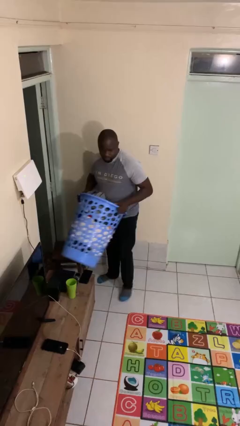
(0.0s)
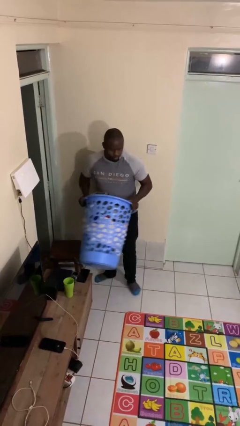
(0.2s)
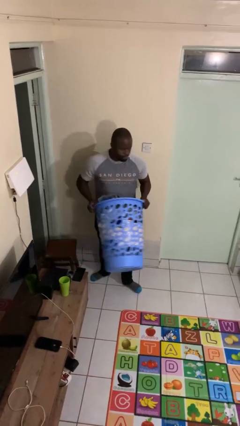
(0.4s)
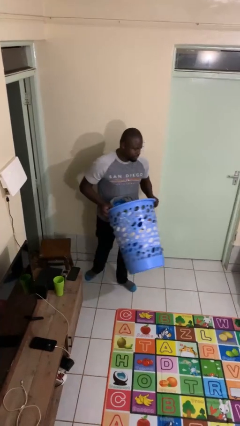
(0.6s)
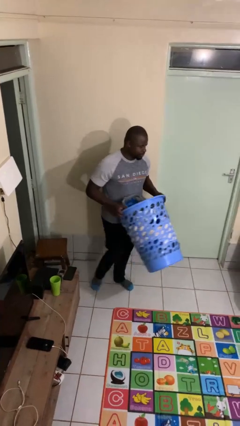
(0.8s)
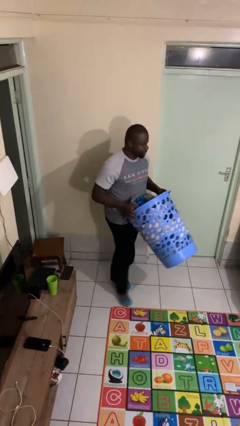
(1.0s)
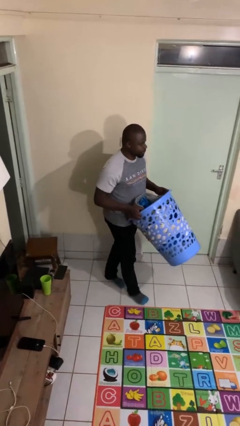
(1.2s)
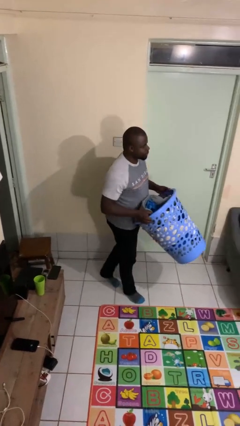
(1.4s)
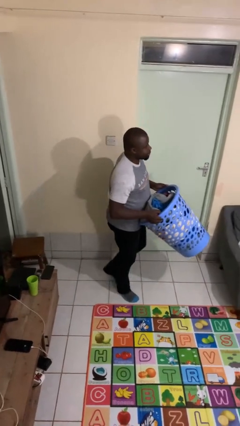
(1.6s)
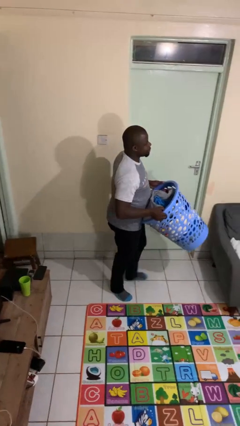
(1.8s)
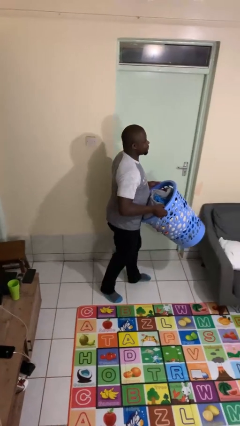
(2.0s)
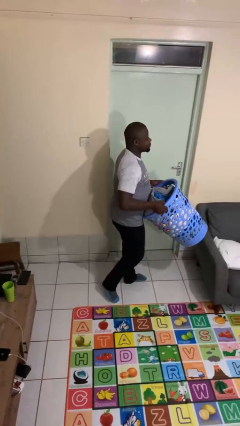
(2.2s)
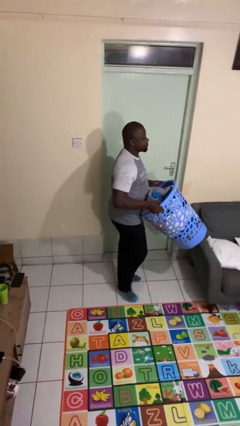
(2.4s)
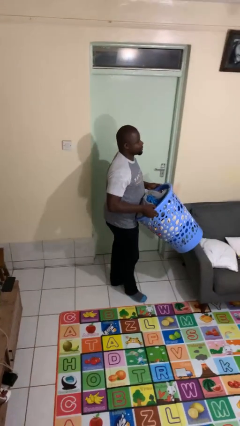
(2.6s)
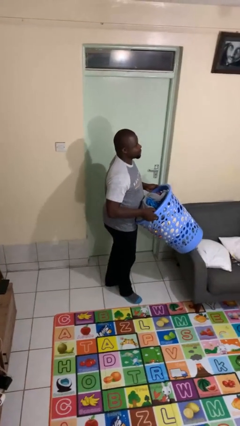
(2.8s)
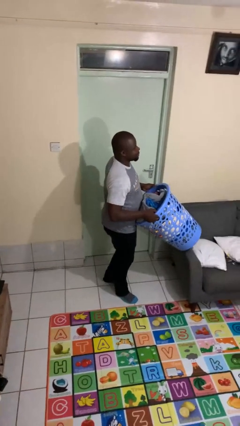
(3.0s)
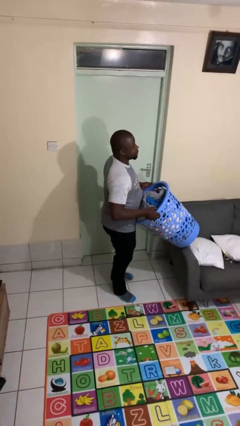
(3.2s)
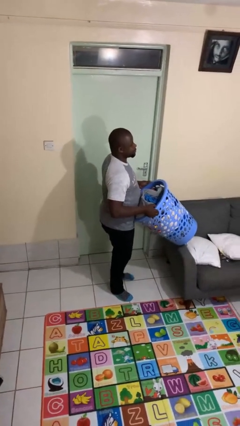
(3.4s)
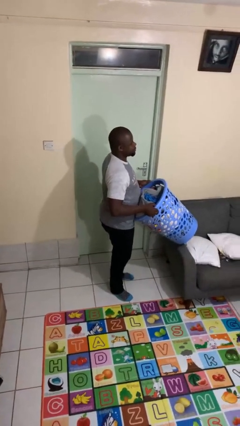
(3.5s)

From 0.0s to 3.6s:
person carries laundry basket

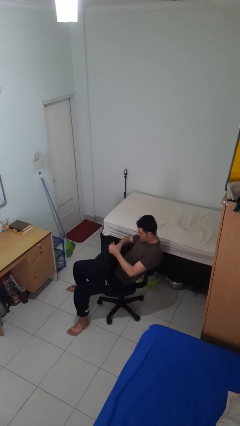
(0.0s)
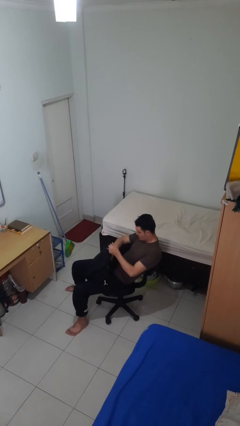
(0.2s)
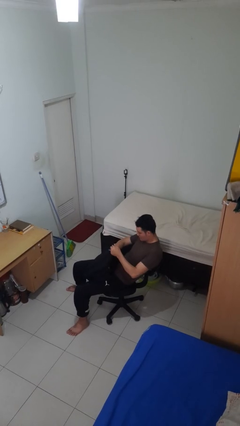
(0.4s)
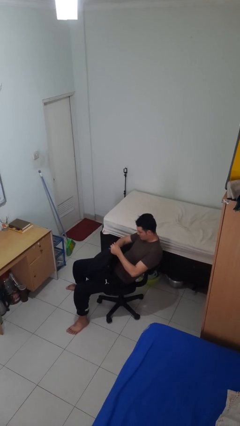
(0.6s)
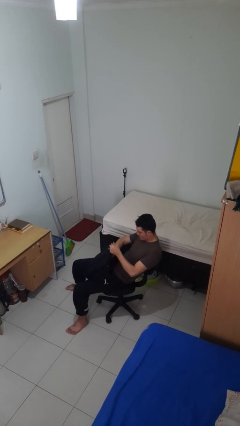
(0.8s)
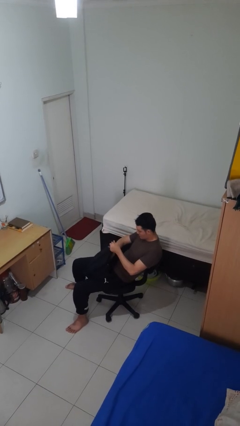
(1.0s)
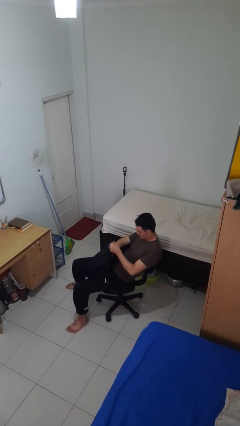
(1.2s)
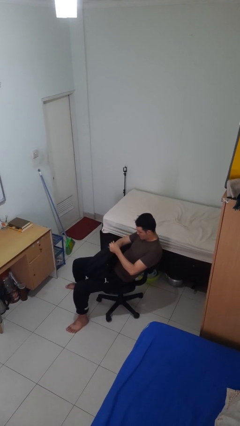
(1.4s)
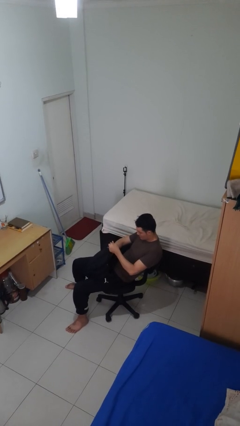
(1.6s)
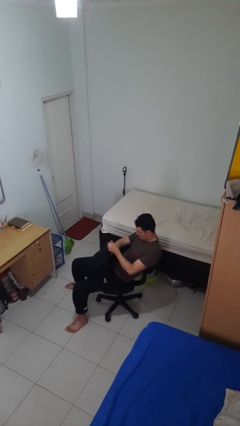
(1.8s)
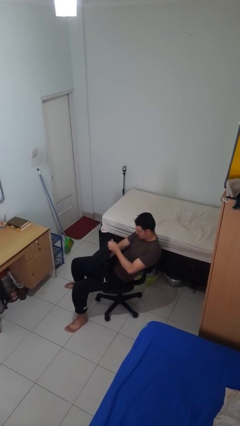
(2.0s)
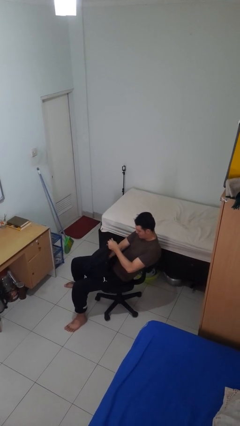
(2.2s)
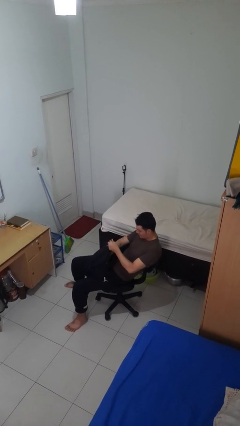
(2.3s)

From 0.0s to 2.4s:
person searches in backpack

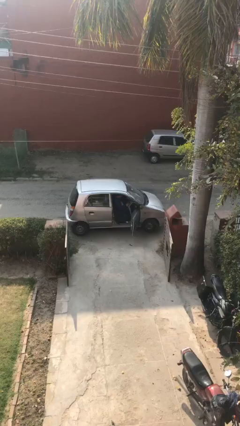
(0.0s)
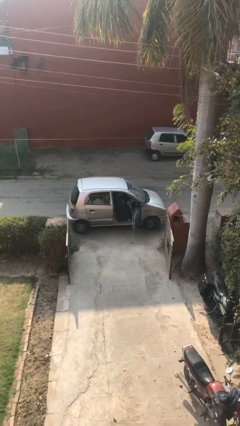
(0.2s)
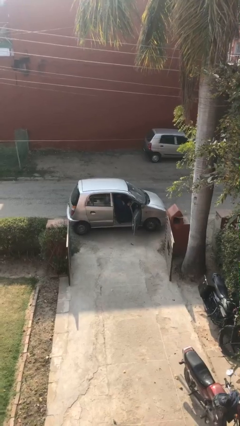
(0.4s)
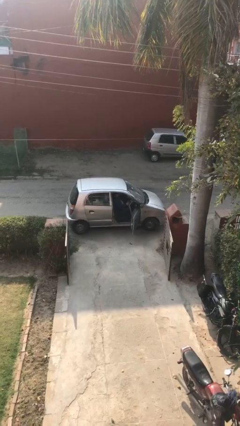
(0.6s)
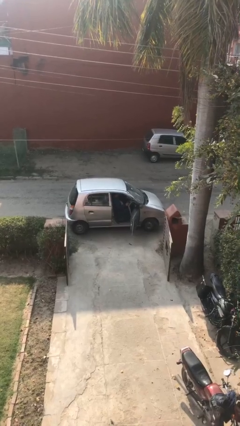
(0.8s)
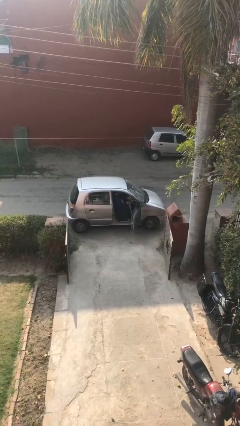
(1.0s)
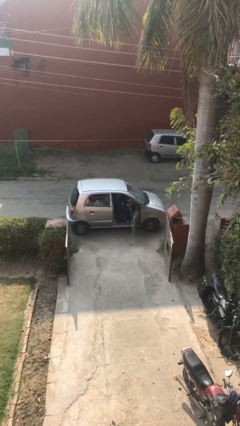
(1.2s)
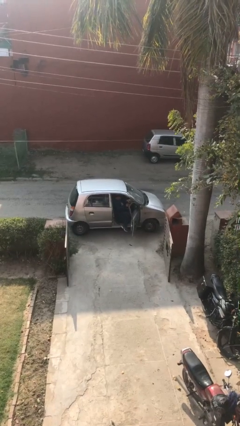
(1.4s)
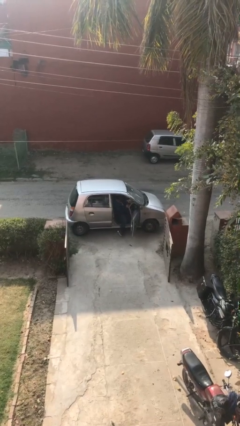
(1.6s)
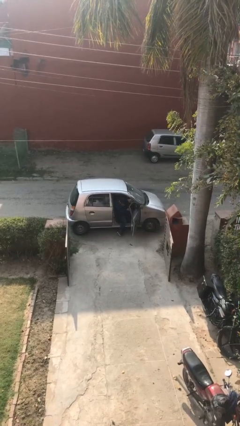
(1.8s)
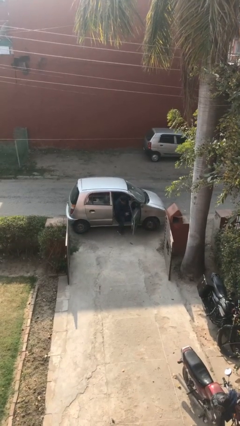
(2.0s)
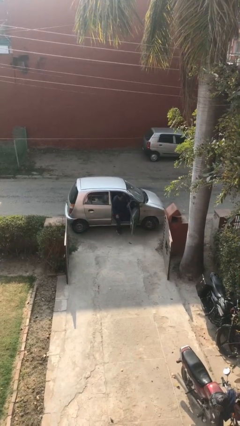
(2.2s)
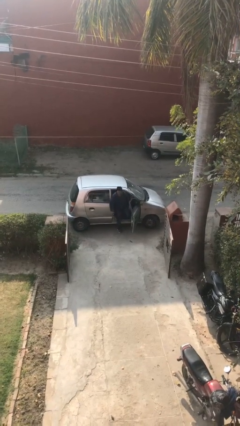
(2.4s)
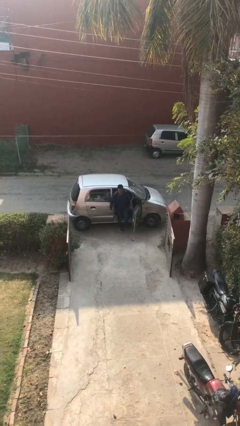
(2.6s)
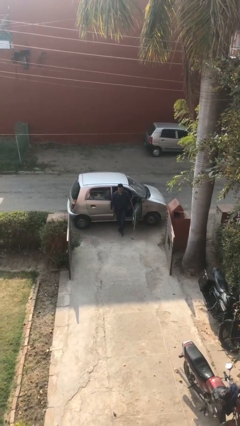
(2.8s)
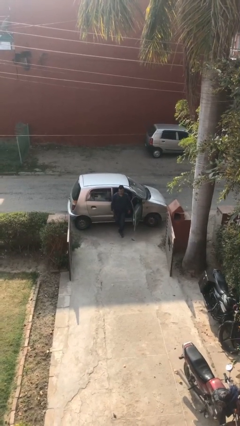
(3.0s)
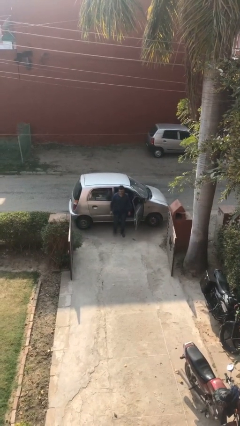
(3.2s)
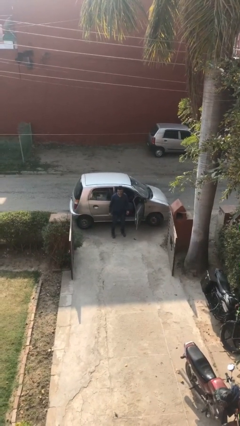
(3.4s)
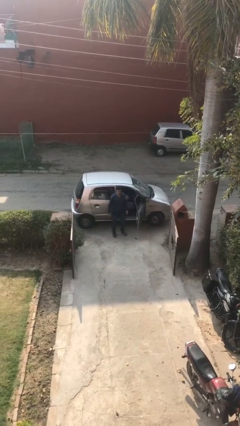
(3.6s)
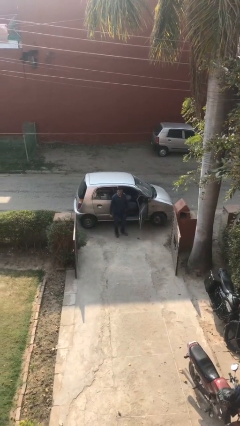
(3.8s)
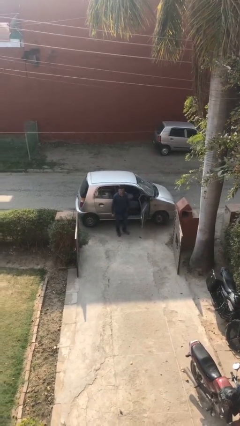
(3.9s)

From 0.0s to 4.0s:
person exits car

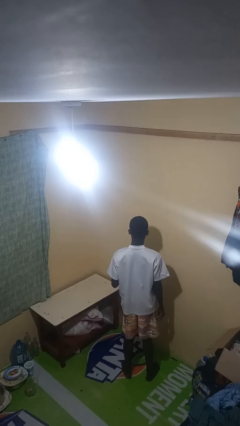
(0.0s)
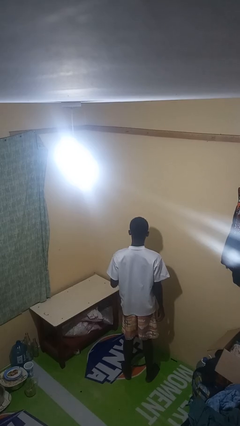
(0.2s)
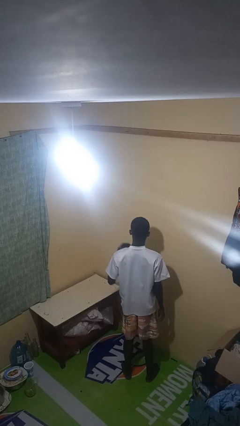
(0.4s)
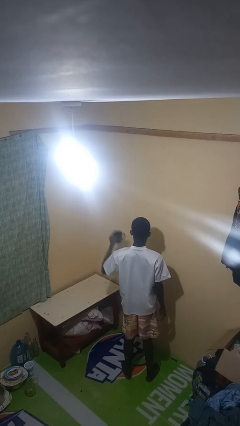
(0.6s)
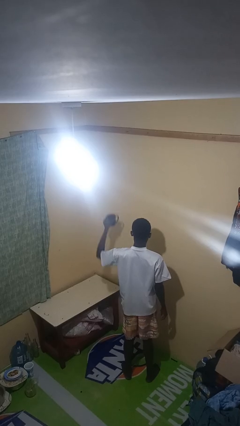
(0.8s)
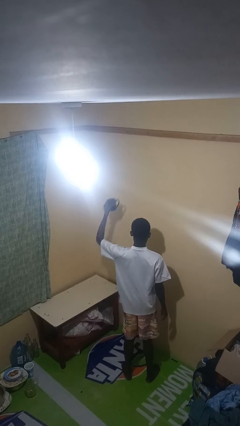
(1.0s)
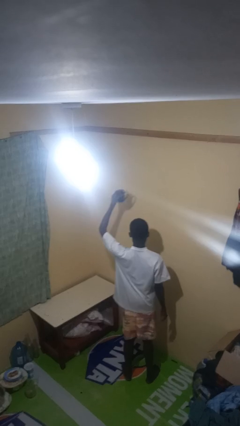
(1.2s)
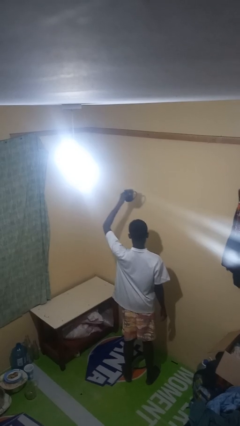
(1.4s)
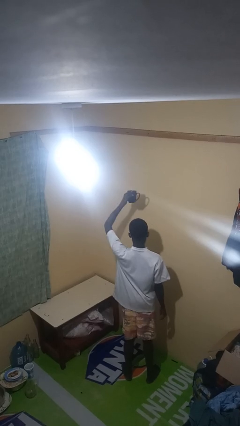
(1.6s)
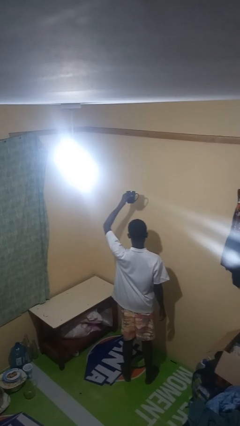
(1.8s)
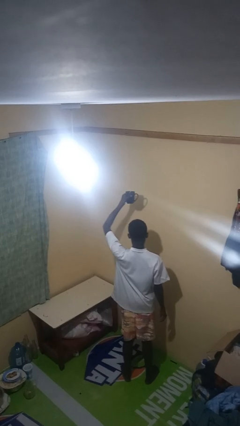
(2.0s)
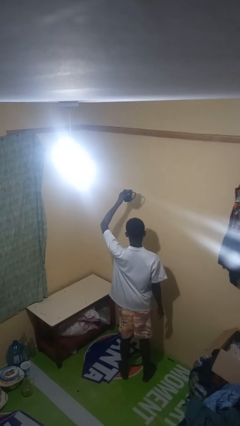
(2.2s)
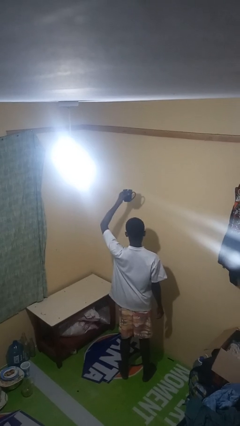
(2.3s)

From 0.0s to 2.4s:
person holds object above head

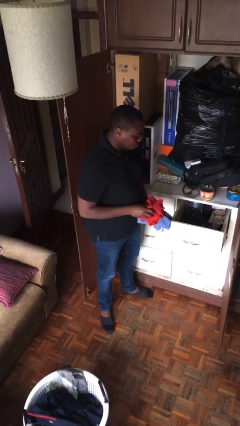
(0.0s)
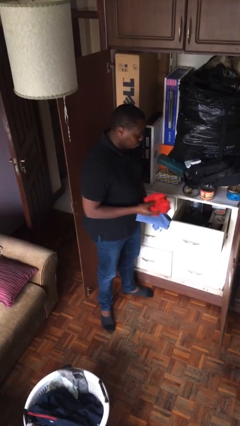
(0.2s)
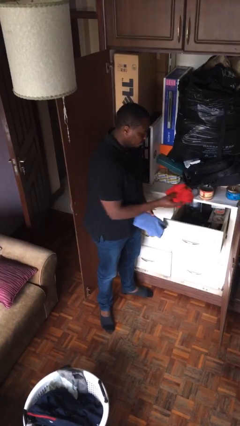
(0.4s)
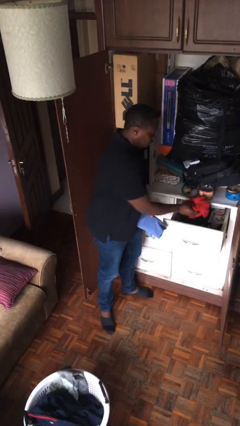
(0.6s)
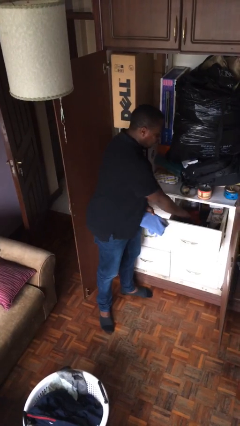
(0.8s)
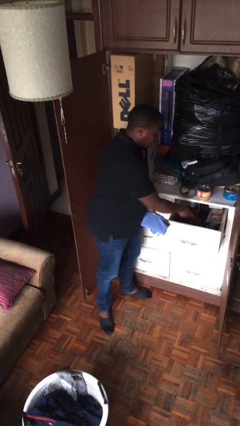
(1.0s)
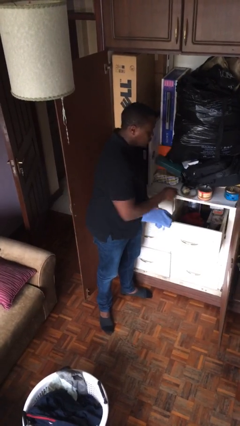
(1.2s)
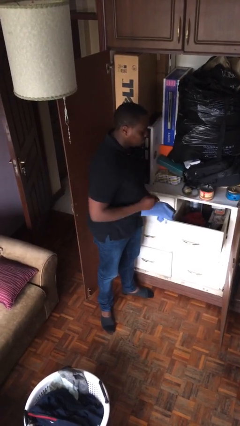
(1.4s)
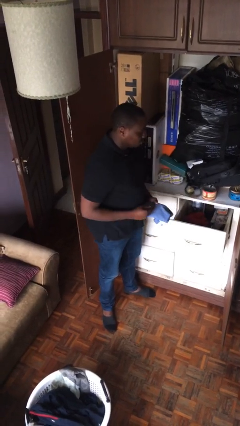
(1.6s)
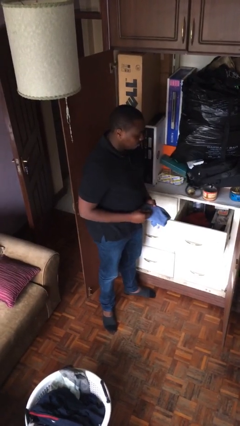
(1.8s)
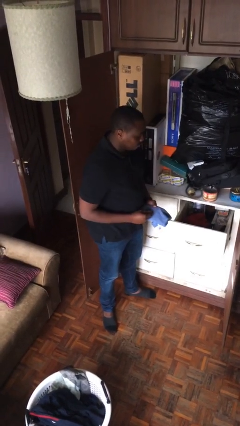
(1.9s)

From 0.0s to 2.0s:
person puts clothes into dresser

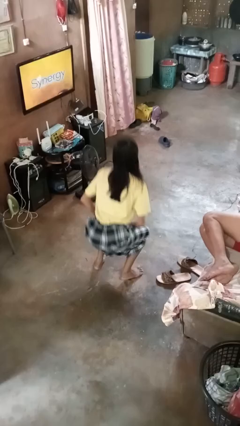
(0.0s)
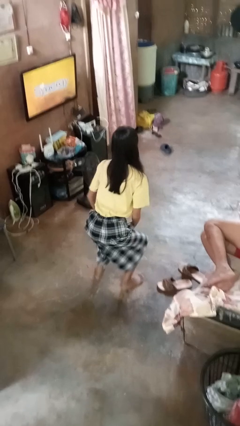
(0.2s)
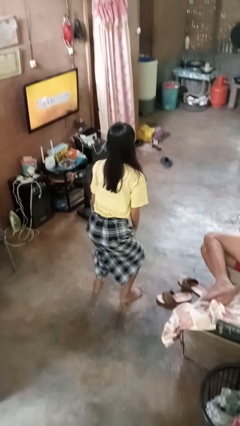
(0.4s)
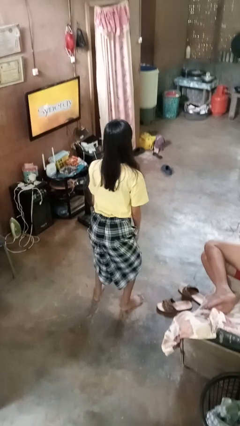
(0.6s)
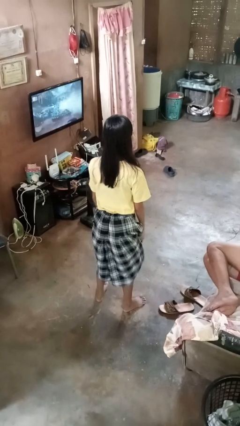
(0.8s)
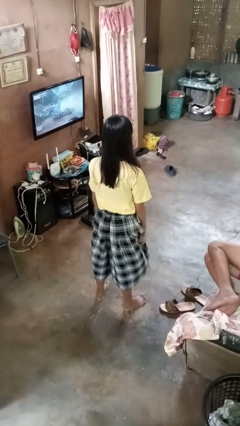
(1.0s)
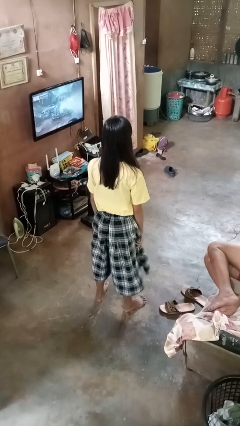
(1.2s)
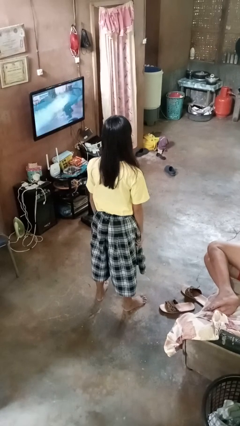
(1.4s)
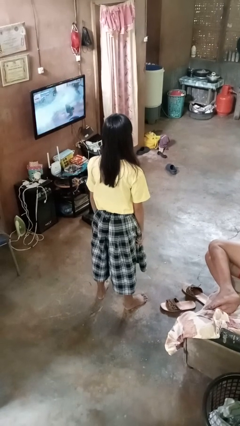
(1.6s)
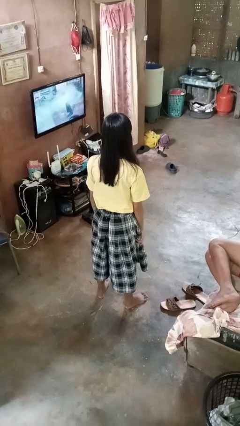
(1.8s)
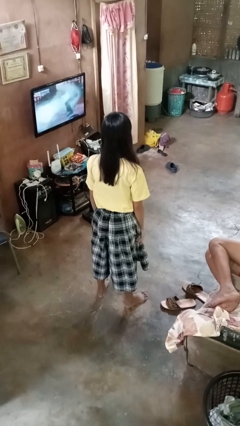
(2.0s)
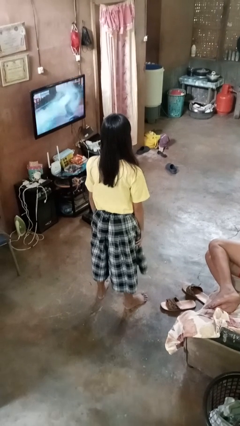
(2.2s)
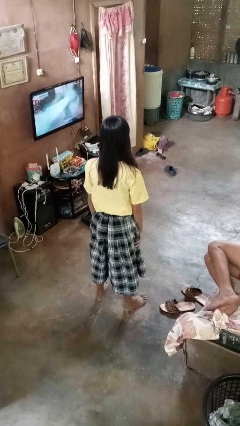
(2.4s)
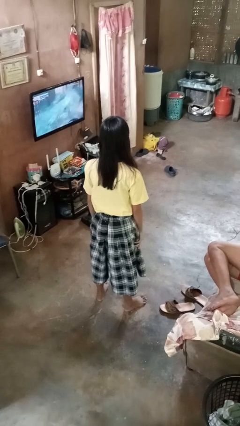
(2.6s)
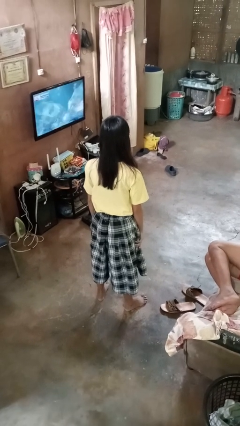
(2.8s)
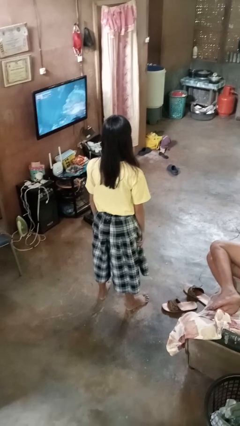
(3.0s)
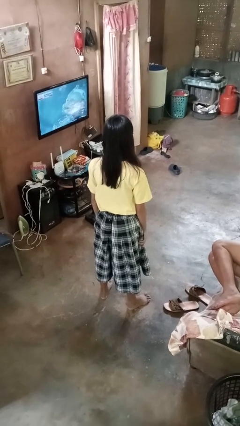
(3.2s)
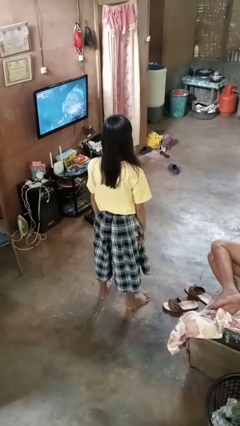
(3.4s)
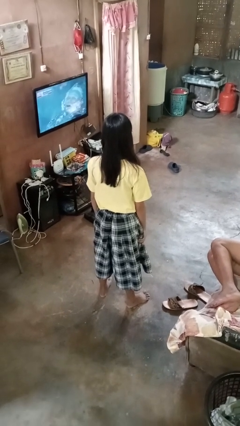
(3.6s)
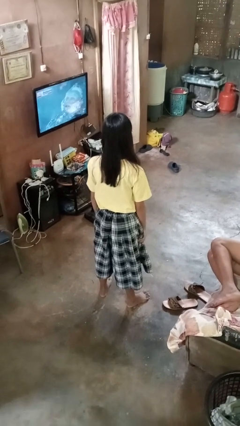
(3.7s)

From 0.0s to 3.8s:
person stands up
